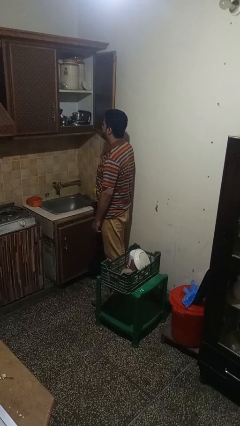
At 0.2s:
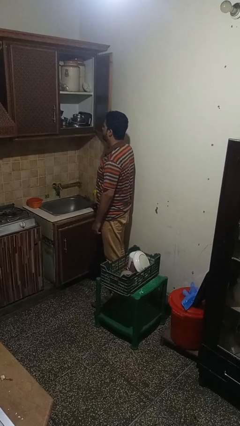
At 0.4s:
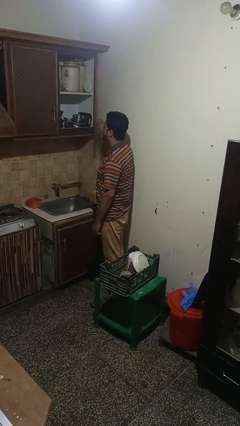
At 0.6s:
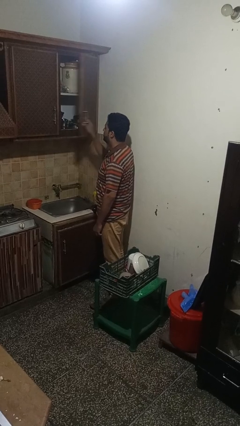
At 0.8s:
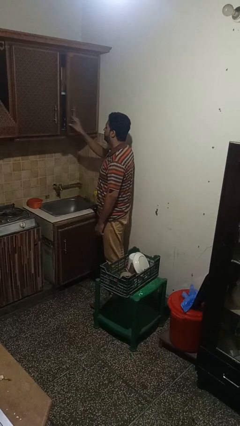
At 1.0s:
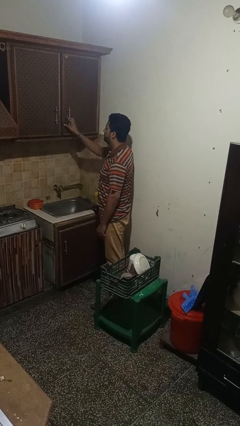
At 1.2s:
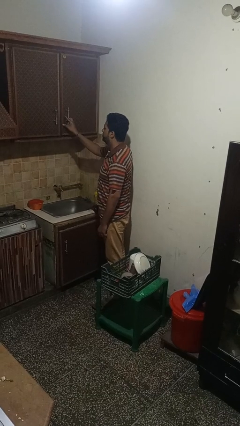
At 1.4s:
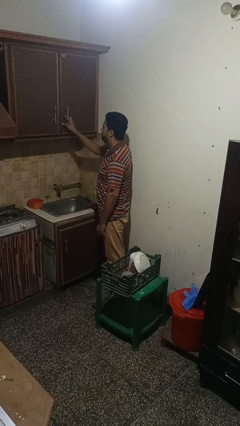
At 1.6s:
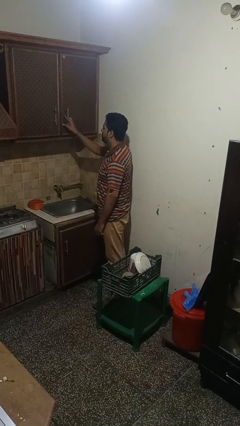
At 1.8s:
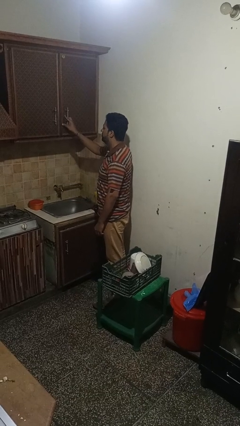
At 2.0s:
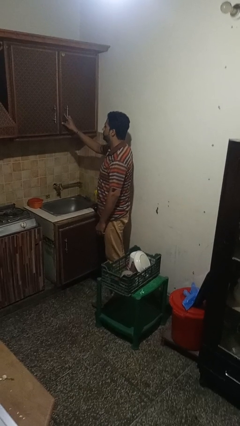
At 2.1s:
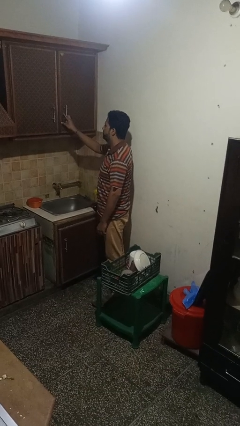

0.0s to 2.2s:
person closes cabinet

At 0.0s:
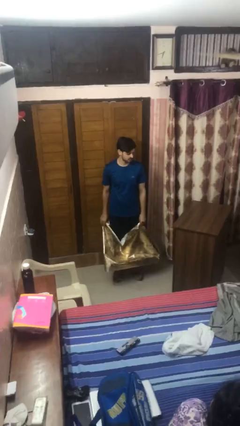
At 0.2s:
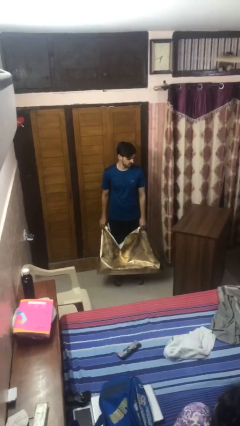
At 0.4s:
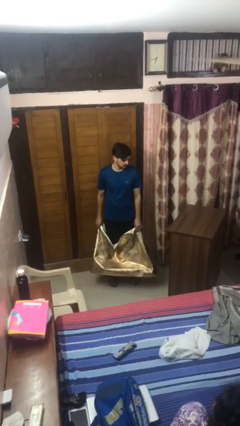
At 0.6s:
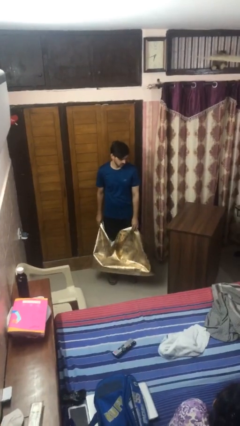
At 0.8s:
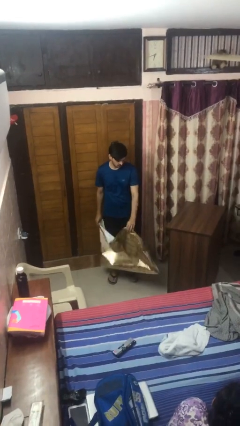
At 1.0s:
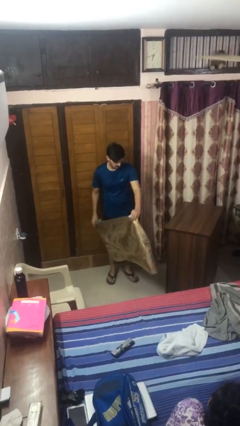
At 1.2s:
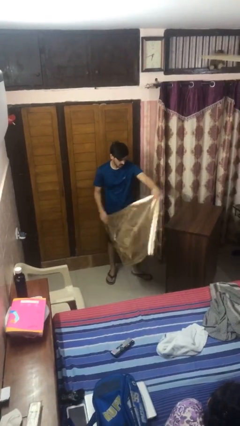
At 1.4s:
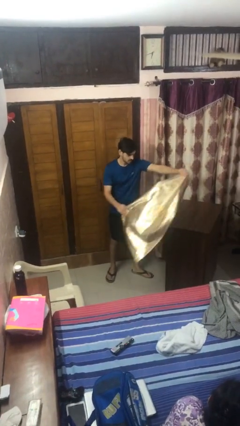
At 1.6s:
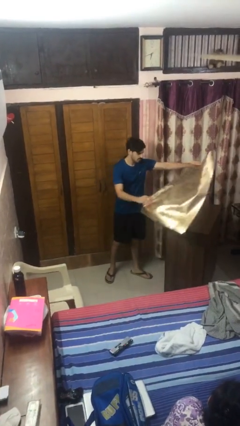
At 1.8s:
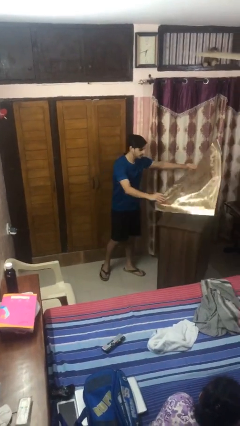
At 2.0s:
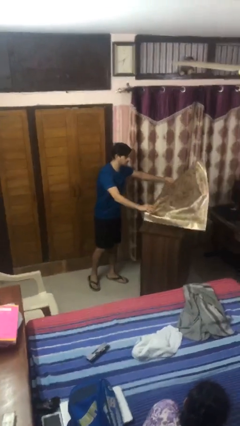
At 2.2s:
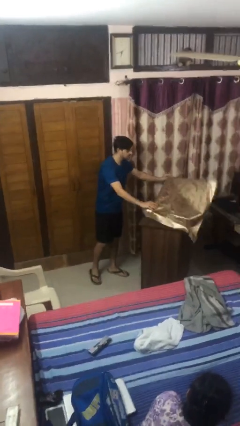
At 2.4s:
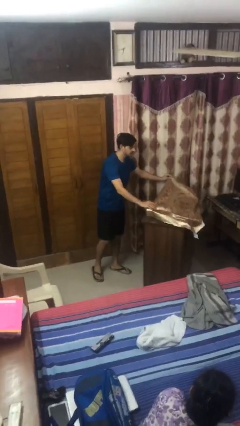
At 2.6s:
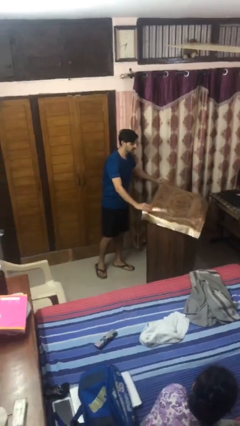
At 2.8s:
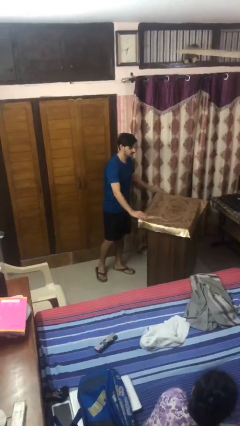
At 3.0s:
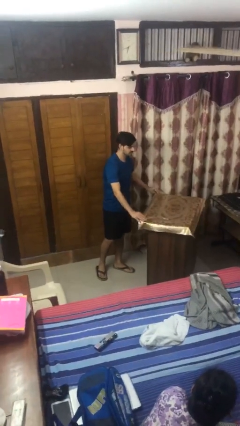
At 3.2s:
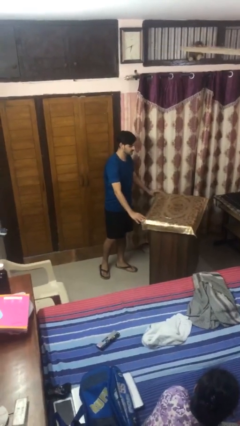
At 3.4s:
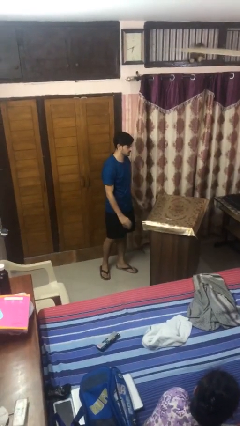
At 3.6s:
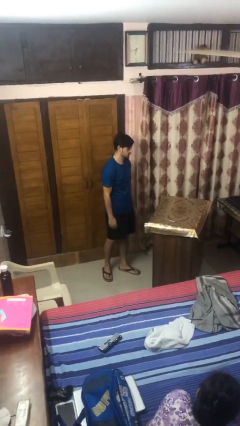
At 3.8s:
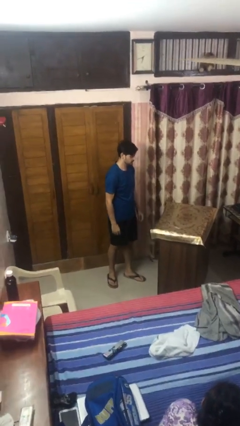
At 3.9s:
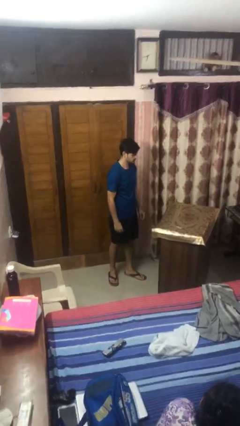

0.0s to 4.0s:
person spreads tablecloth

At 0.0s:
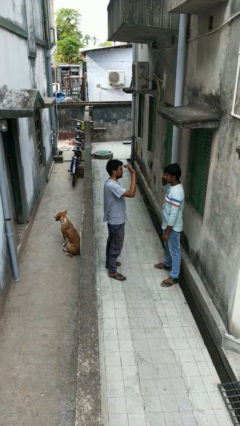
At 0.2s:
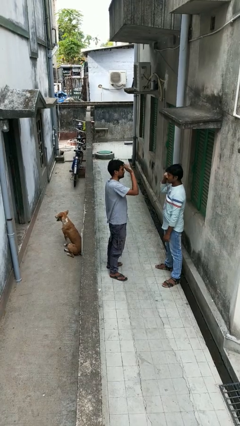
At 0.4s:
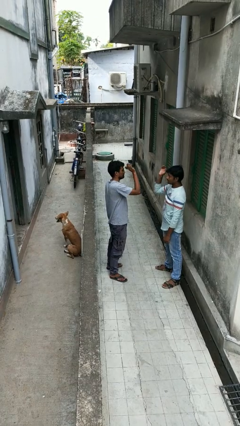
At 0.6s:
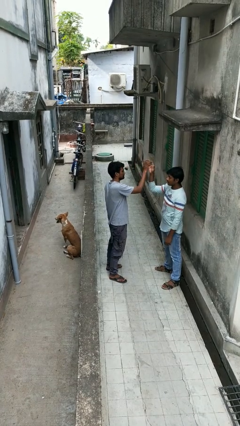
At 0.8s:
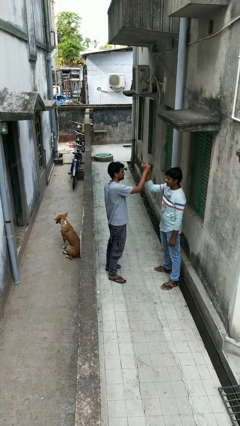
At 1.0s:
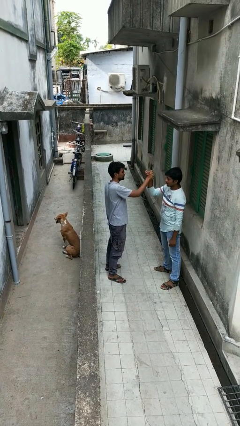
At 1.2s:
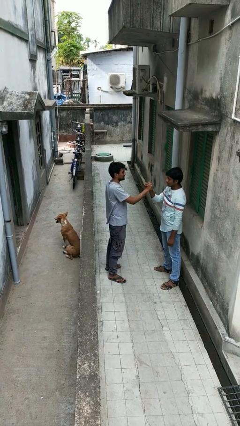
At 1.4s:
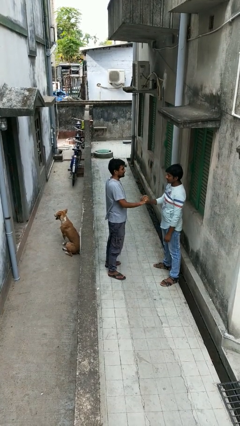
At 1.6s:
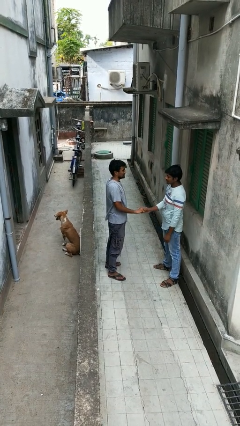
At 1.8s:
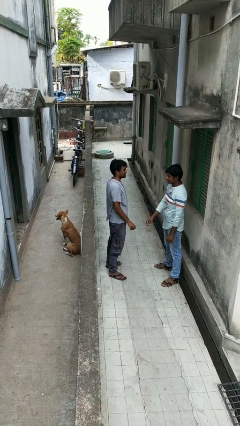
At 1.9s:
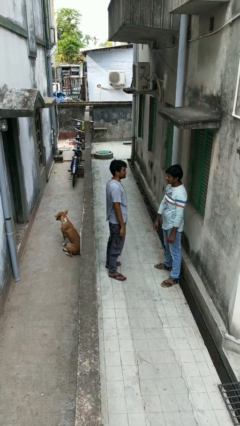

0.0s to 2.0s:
person highfives hand

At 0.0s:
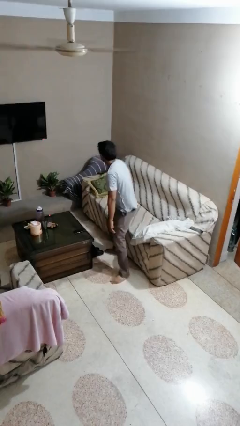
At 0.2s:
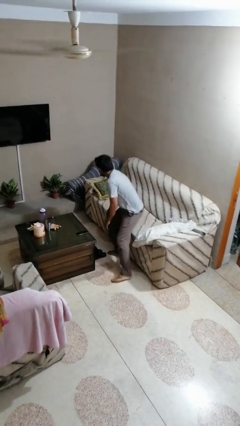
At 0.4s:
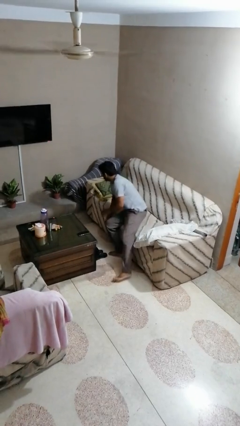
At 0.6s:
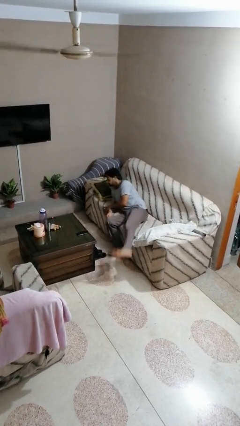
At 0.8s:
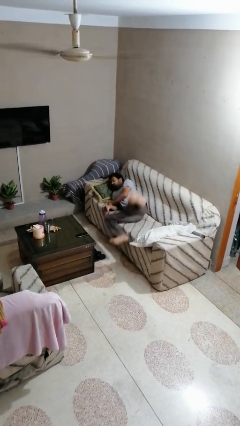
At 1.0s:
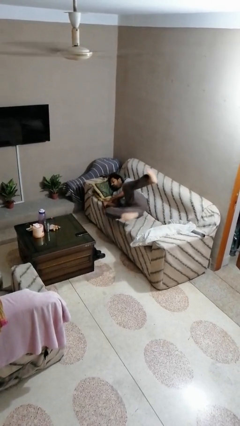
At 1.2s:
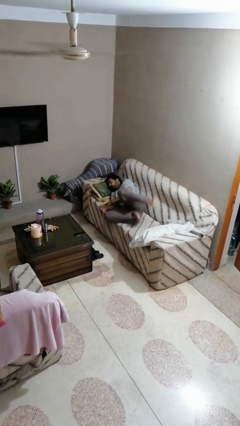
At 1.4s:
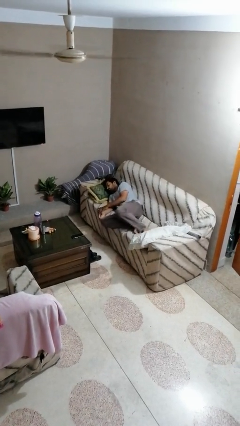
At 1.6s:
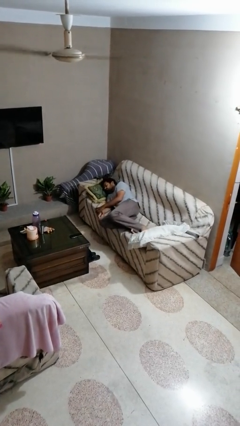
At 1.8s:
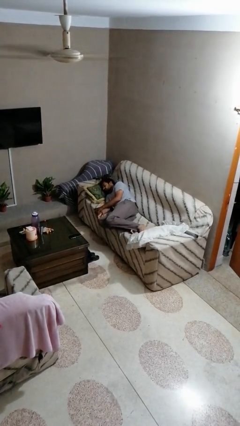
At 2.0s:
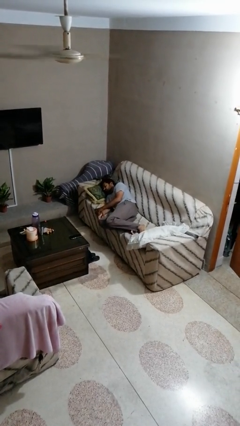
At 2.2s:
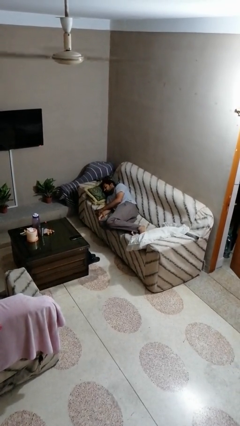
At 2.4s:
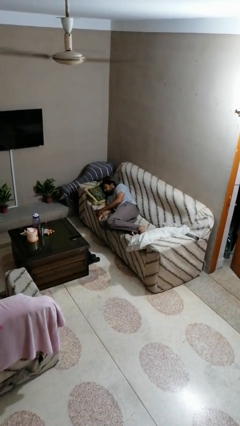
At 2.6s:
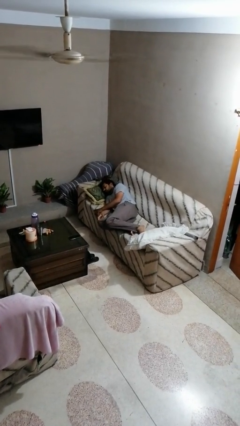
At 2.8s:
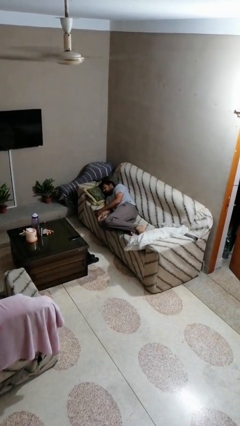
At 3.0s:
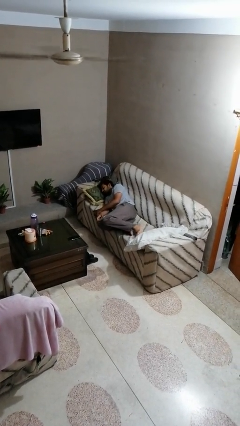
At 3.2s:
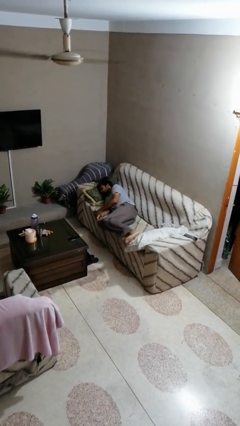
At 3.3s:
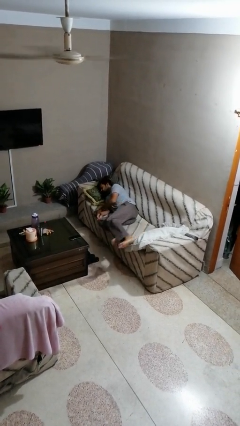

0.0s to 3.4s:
person lies down on couch

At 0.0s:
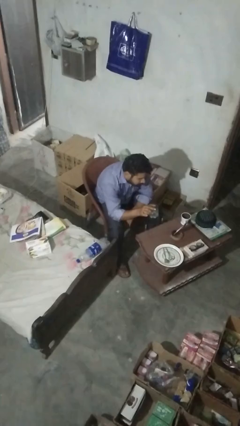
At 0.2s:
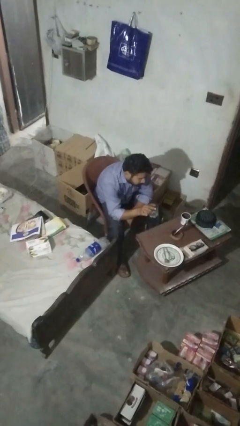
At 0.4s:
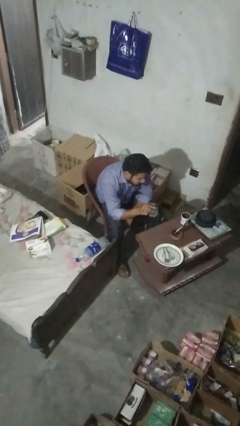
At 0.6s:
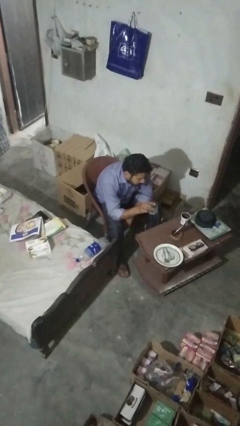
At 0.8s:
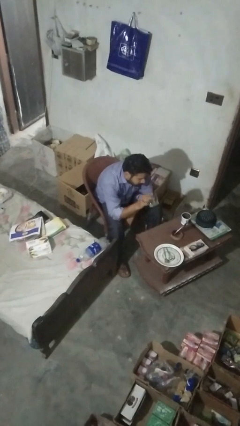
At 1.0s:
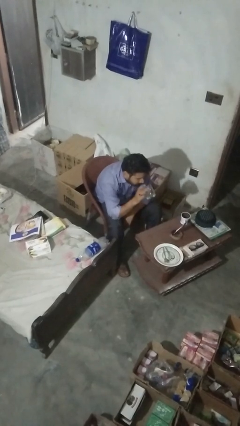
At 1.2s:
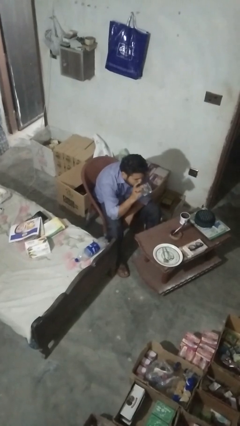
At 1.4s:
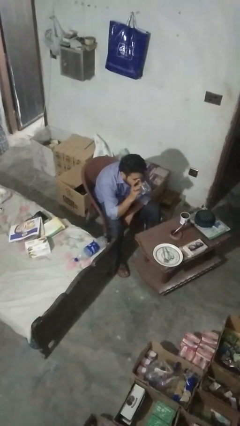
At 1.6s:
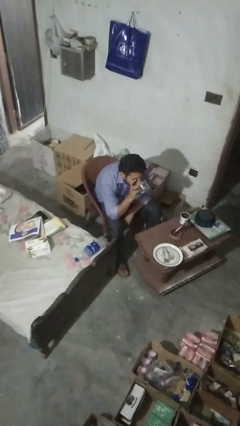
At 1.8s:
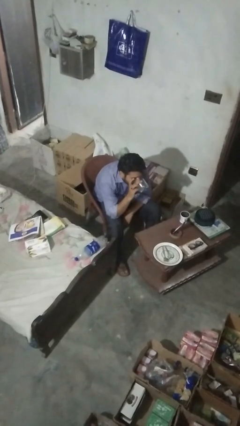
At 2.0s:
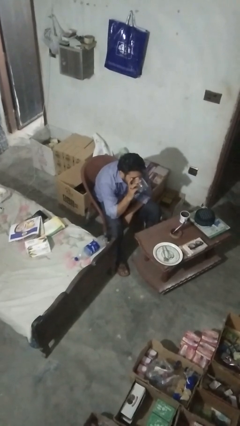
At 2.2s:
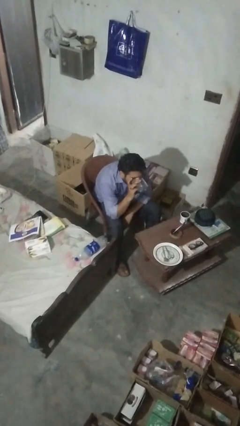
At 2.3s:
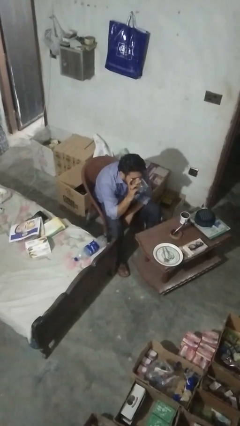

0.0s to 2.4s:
person drinks from shotglass

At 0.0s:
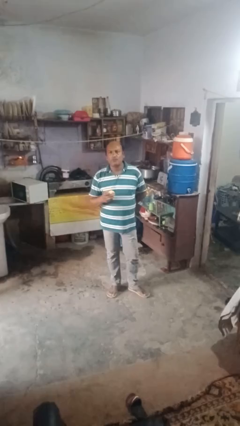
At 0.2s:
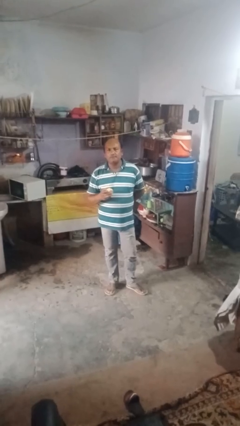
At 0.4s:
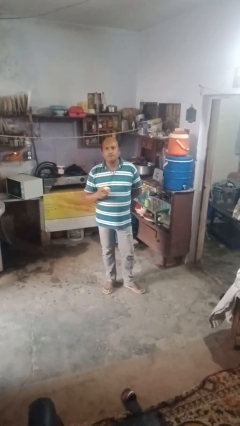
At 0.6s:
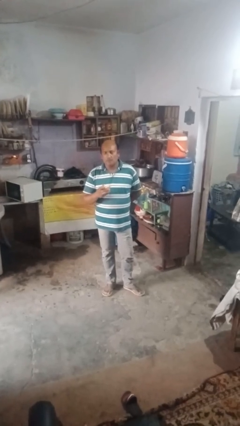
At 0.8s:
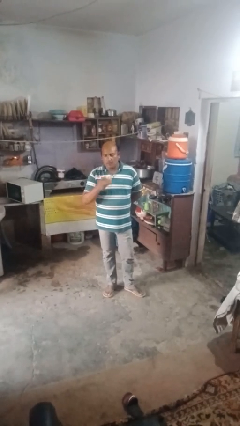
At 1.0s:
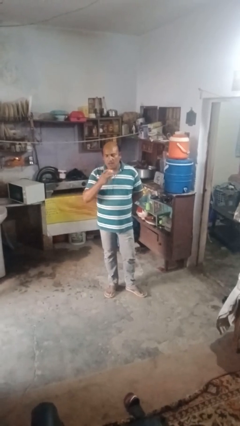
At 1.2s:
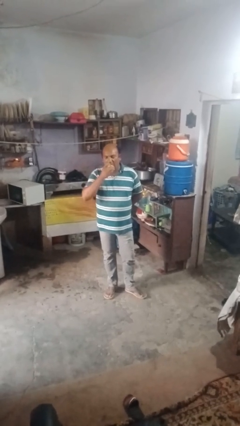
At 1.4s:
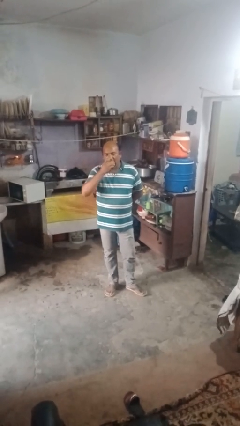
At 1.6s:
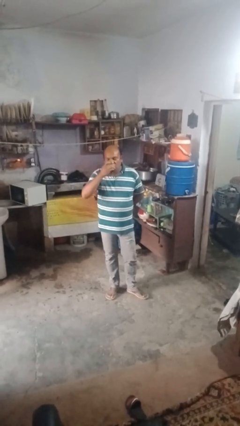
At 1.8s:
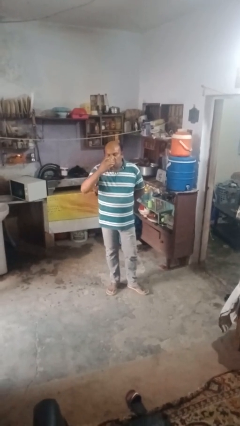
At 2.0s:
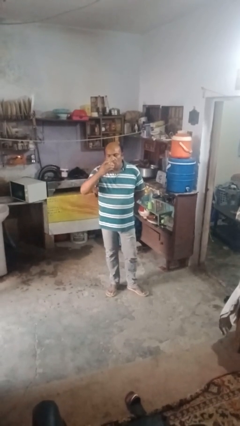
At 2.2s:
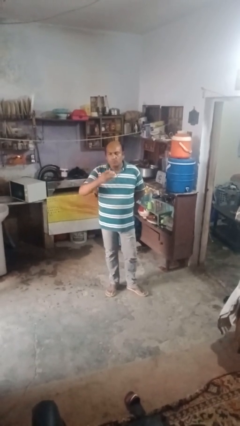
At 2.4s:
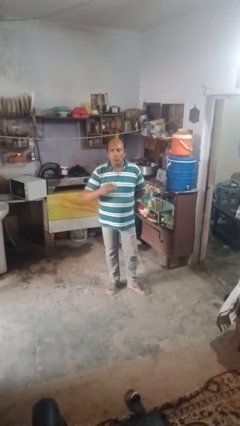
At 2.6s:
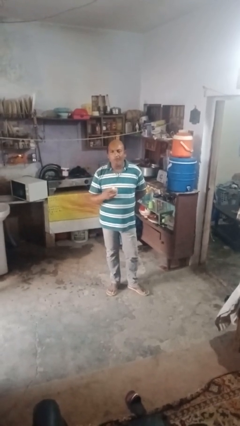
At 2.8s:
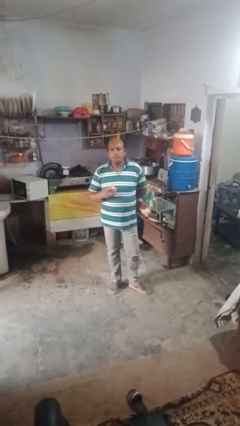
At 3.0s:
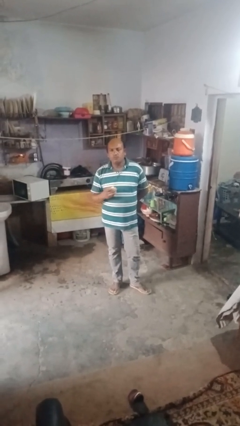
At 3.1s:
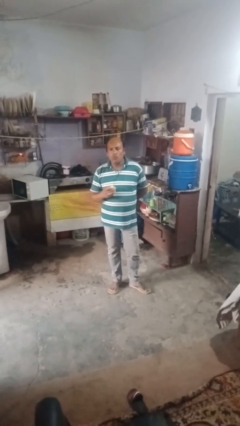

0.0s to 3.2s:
person eats apple
